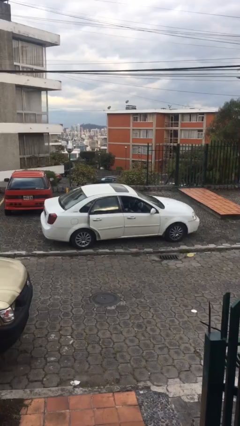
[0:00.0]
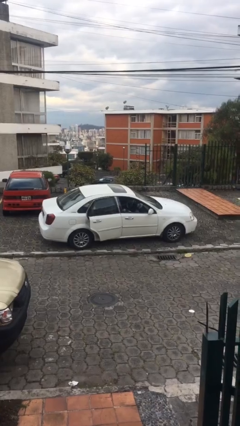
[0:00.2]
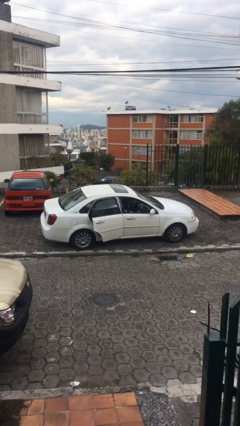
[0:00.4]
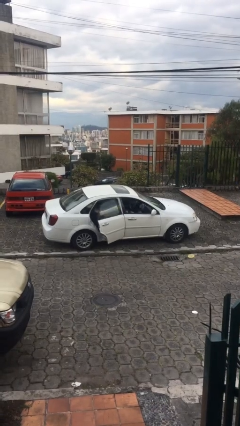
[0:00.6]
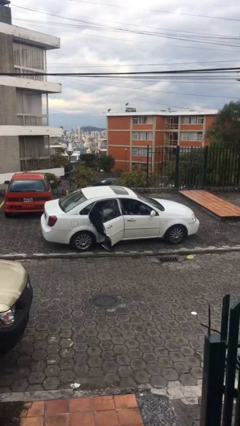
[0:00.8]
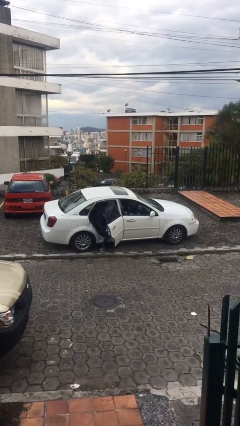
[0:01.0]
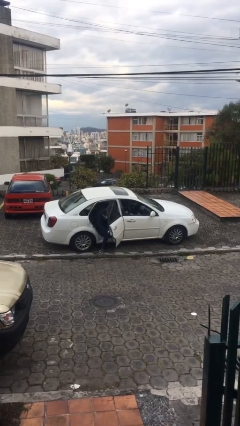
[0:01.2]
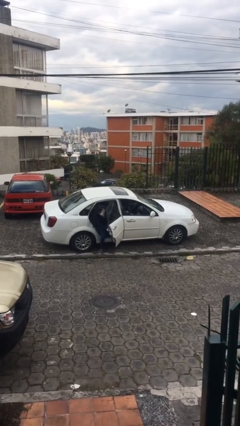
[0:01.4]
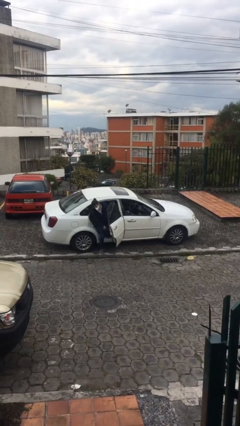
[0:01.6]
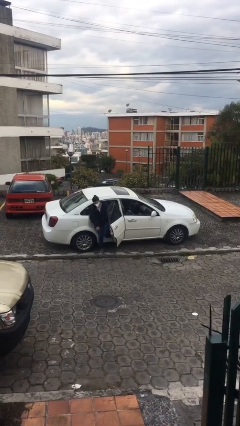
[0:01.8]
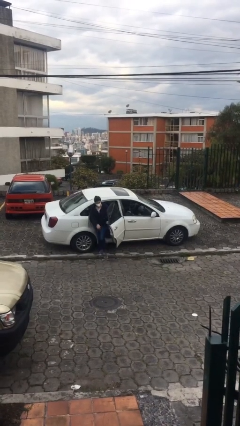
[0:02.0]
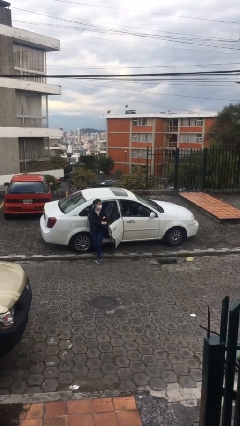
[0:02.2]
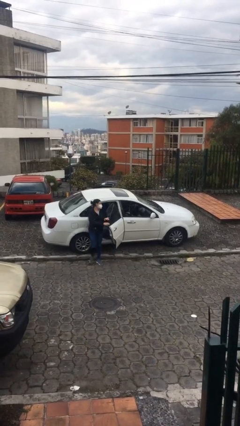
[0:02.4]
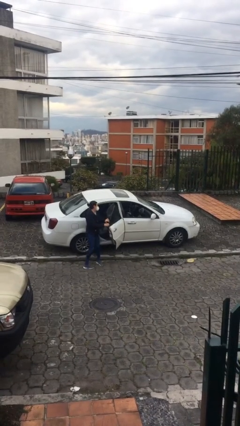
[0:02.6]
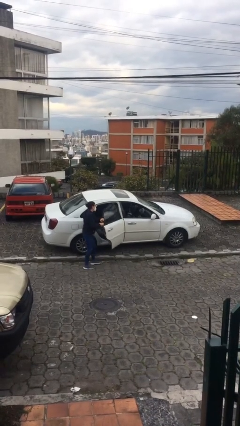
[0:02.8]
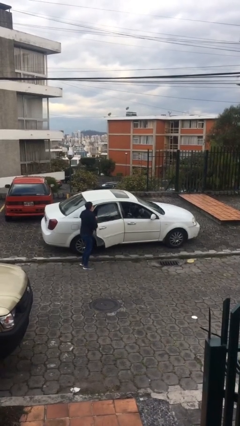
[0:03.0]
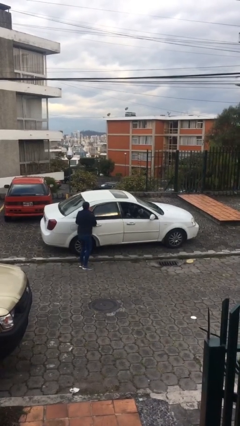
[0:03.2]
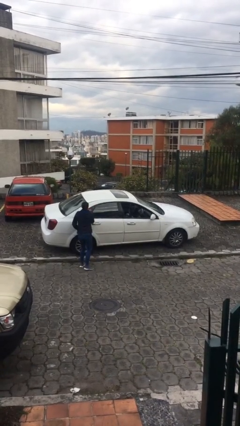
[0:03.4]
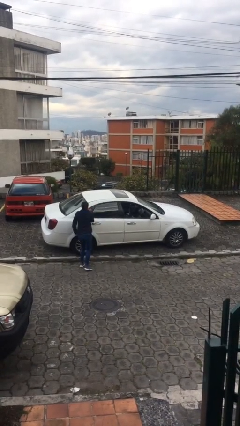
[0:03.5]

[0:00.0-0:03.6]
car drops off person

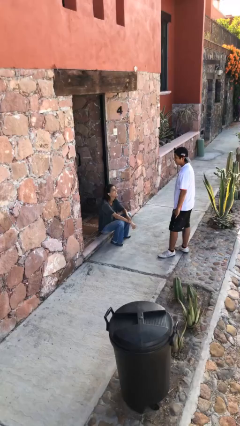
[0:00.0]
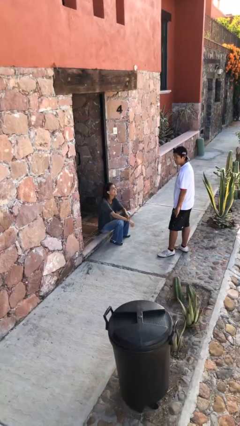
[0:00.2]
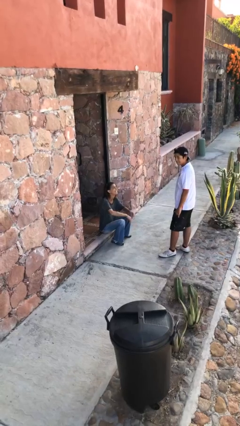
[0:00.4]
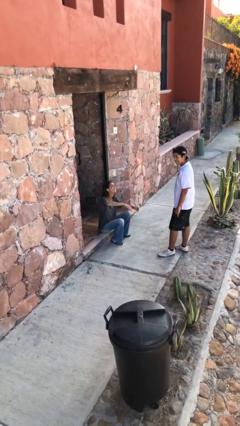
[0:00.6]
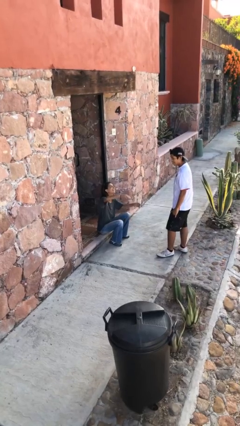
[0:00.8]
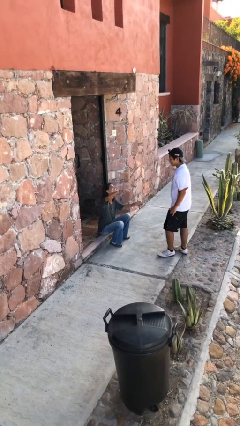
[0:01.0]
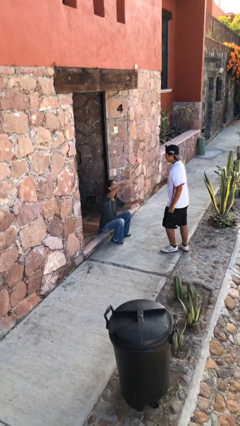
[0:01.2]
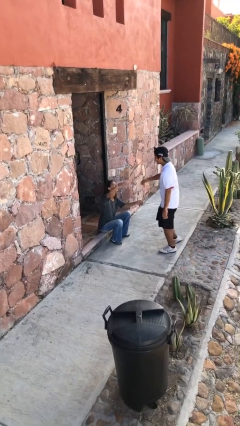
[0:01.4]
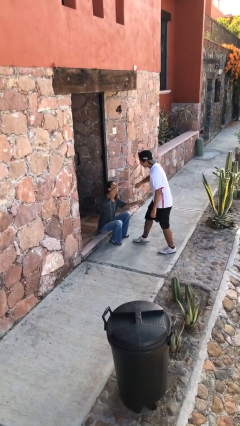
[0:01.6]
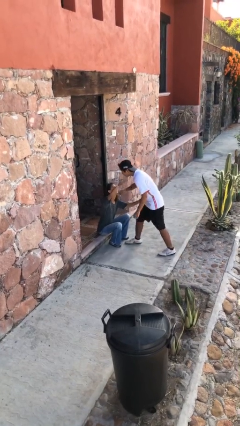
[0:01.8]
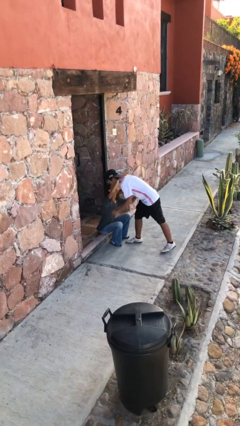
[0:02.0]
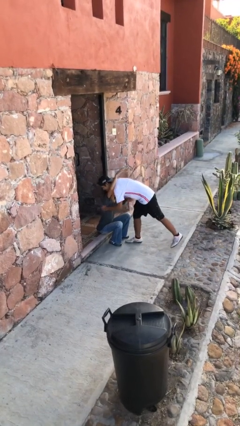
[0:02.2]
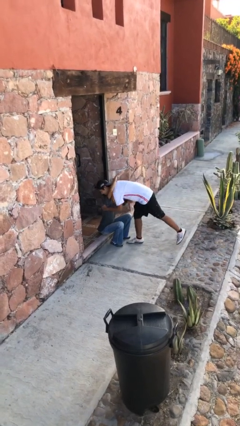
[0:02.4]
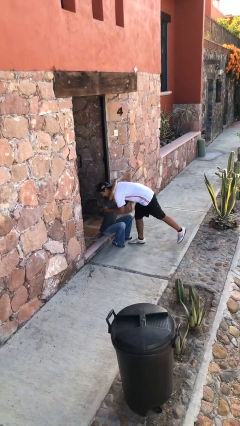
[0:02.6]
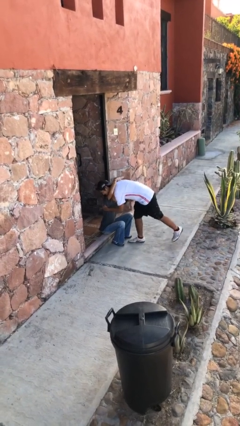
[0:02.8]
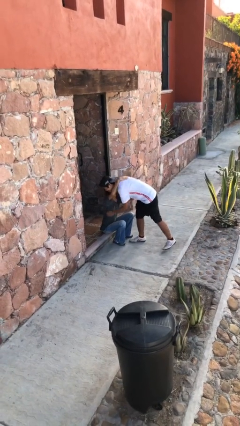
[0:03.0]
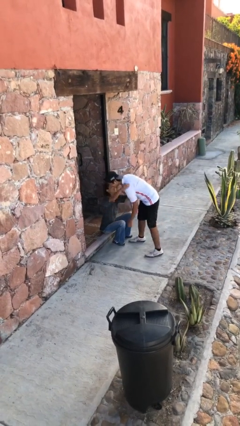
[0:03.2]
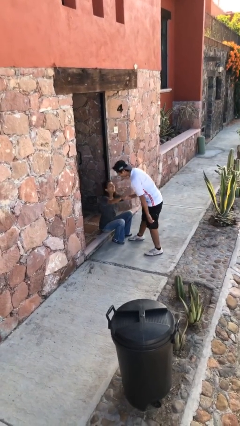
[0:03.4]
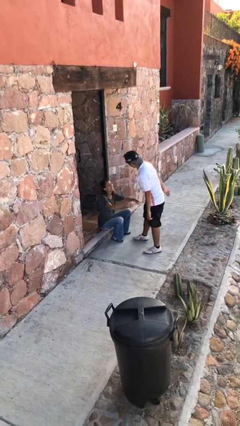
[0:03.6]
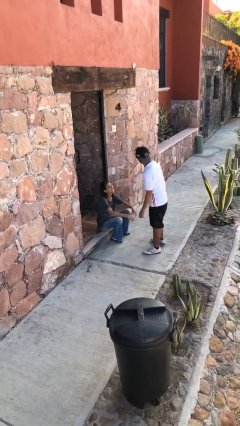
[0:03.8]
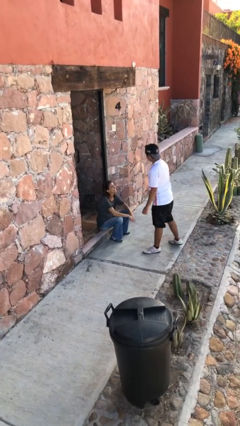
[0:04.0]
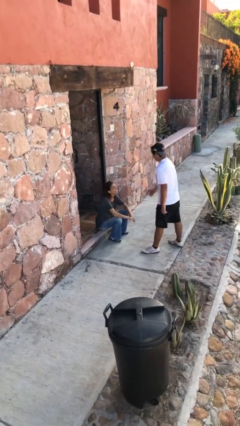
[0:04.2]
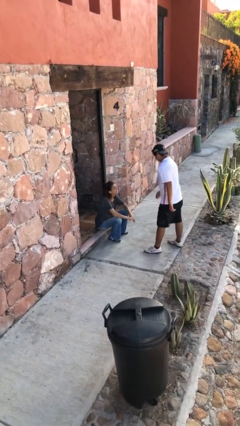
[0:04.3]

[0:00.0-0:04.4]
person embraces person

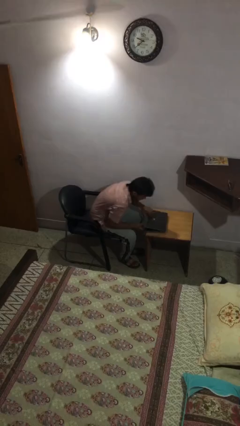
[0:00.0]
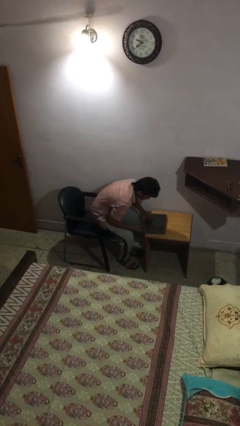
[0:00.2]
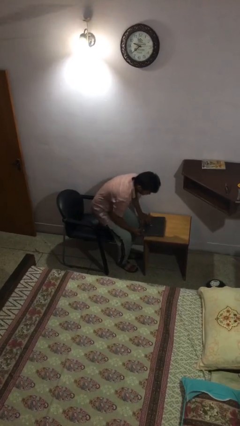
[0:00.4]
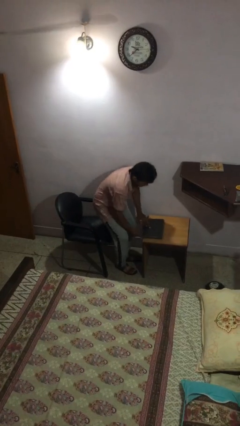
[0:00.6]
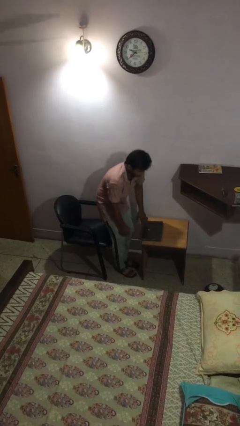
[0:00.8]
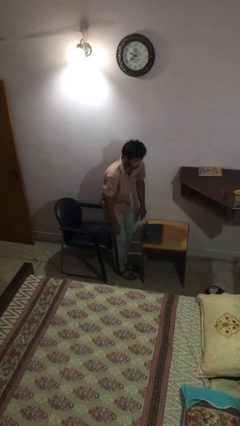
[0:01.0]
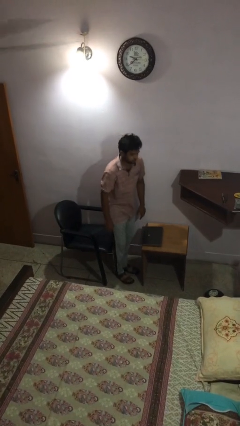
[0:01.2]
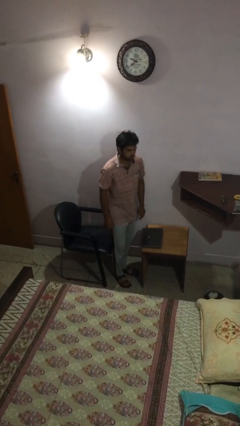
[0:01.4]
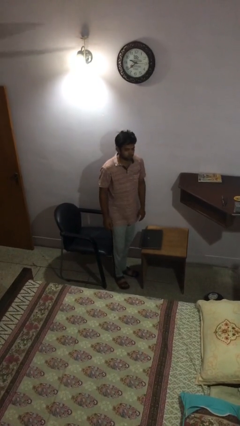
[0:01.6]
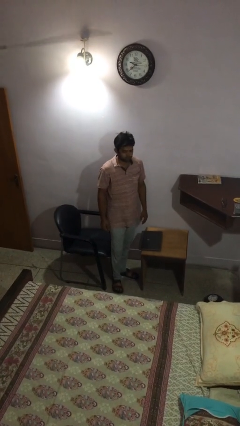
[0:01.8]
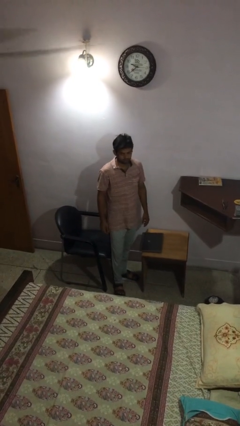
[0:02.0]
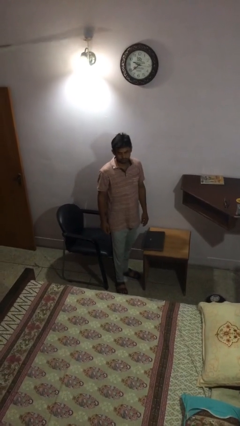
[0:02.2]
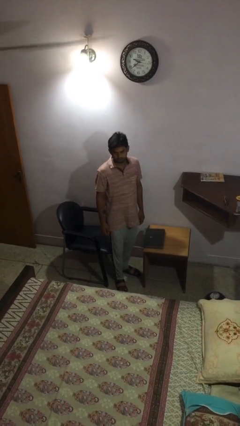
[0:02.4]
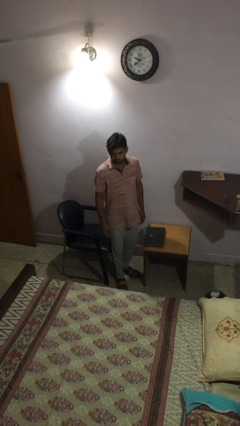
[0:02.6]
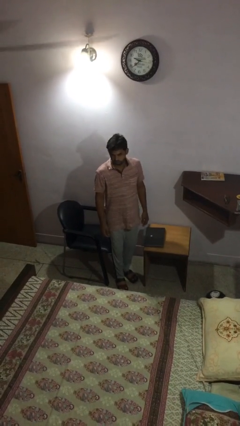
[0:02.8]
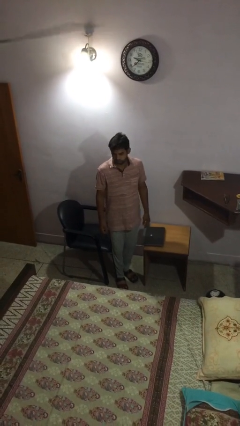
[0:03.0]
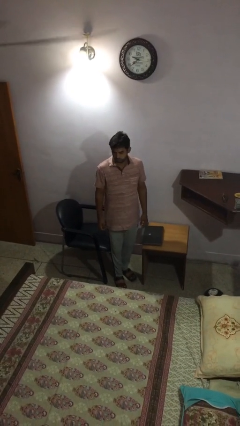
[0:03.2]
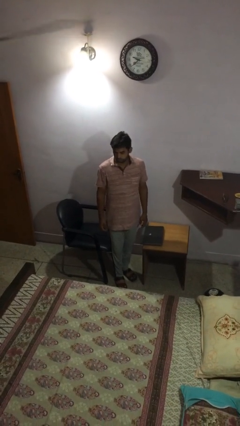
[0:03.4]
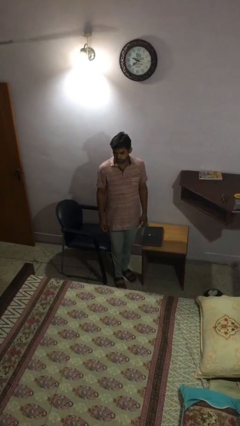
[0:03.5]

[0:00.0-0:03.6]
person stands up

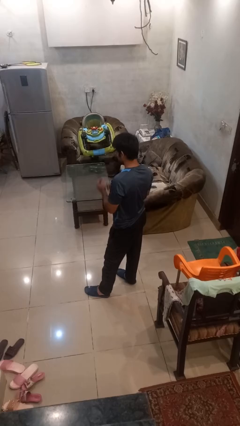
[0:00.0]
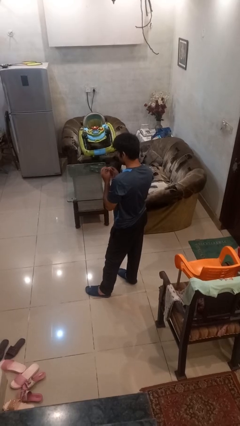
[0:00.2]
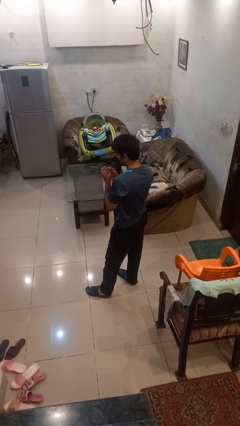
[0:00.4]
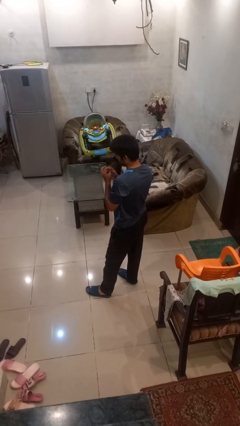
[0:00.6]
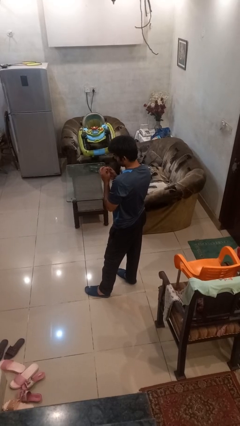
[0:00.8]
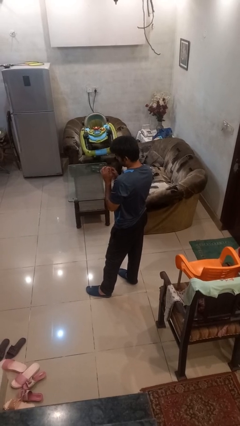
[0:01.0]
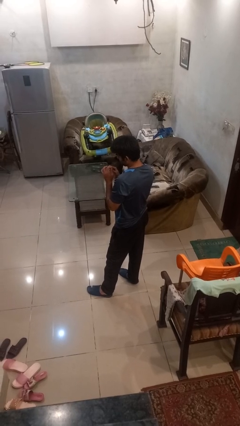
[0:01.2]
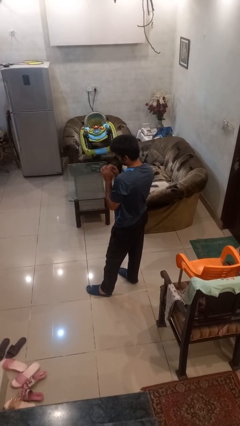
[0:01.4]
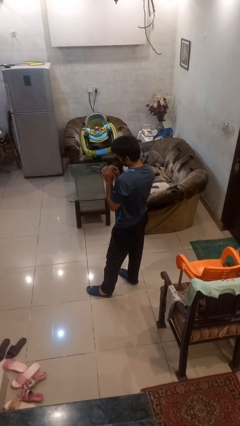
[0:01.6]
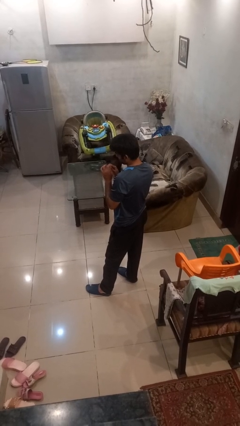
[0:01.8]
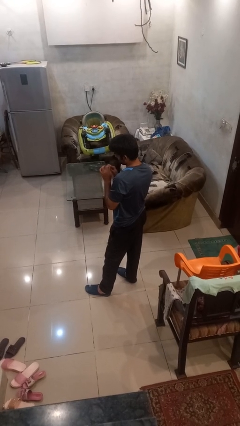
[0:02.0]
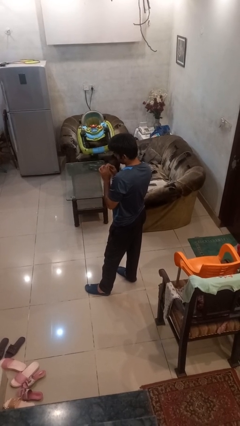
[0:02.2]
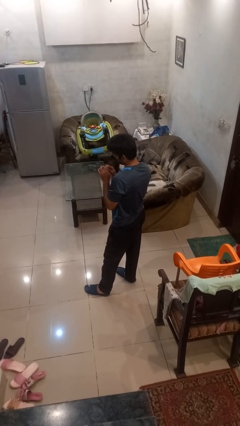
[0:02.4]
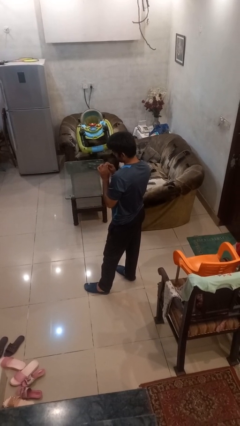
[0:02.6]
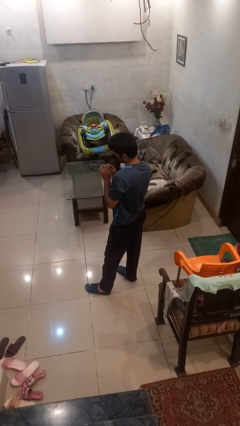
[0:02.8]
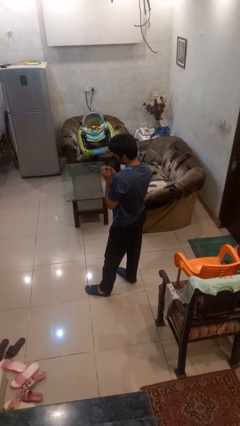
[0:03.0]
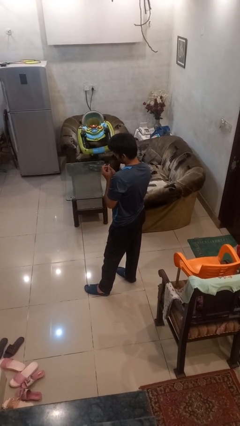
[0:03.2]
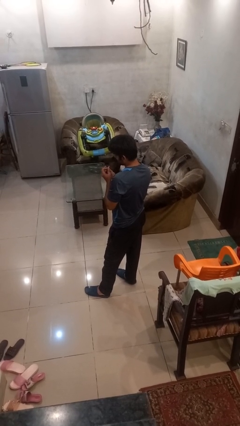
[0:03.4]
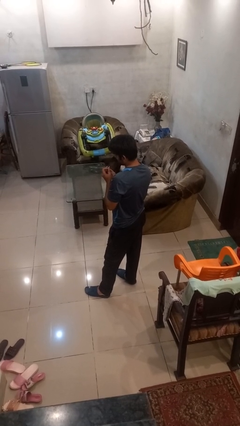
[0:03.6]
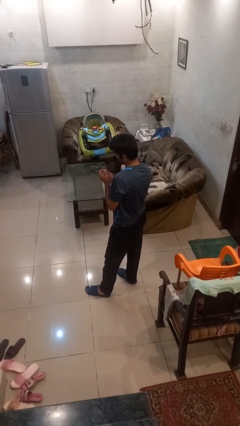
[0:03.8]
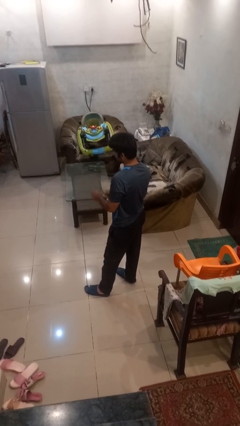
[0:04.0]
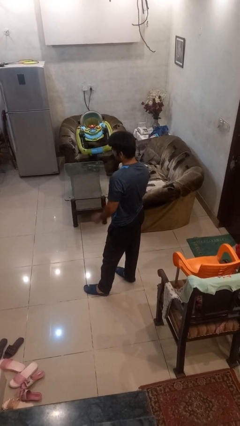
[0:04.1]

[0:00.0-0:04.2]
person files fingernails

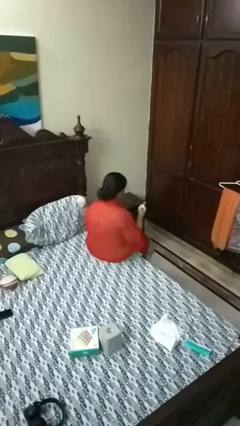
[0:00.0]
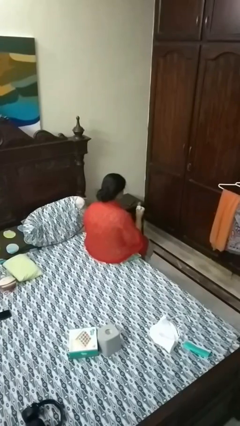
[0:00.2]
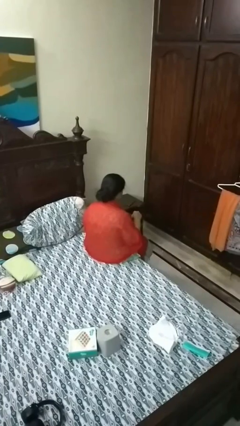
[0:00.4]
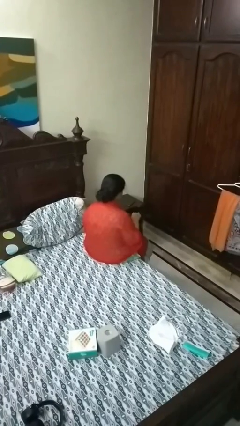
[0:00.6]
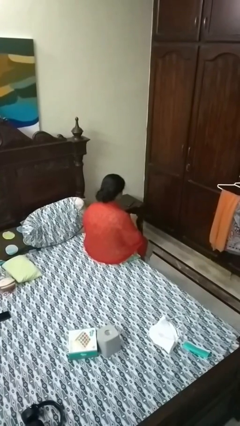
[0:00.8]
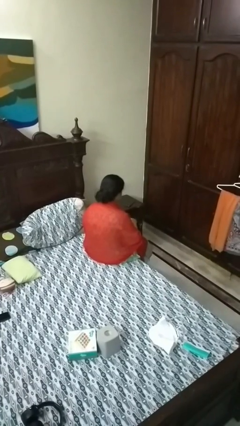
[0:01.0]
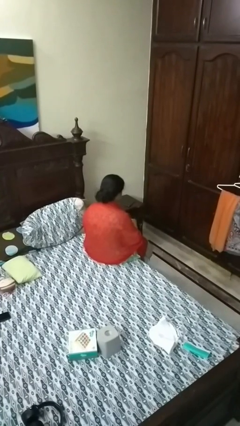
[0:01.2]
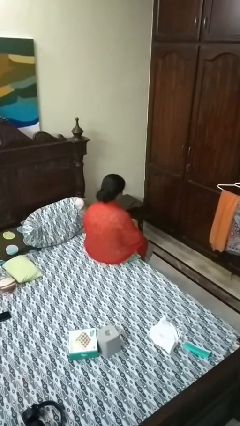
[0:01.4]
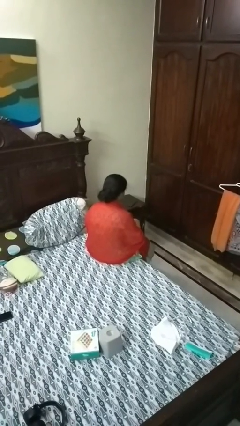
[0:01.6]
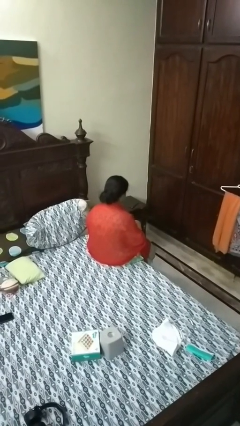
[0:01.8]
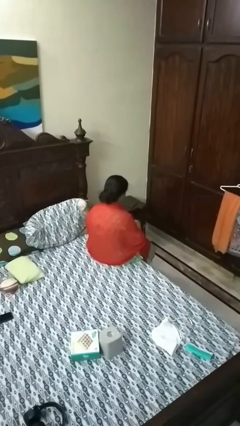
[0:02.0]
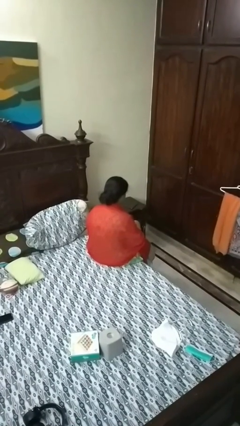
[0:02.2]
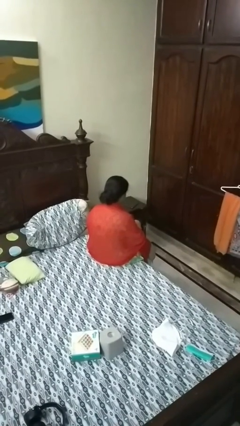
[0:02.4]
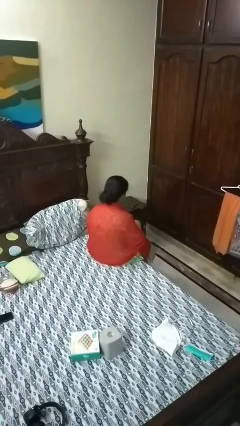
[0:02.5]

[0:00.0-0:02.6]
person puts object into purse
